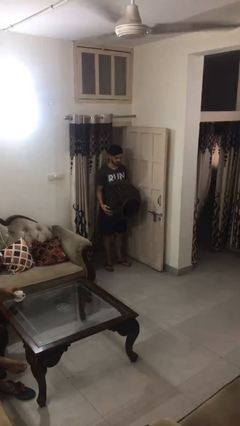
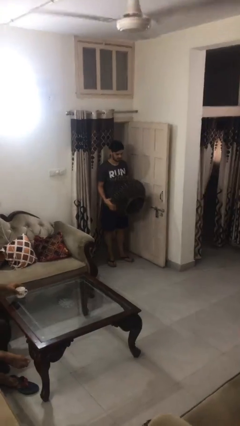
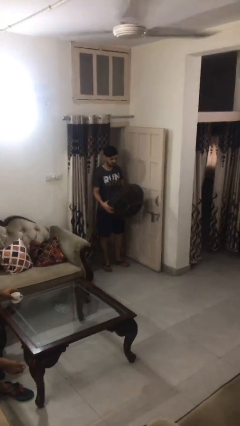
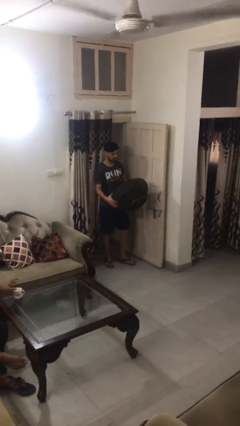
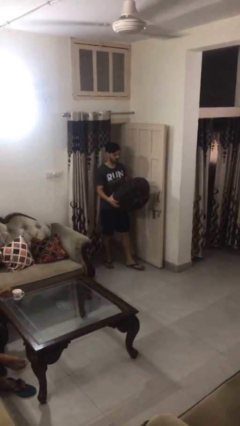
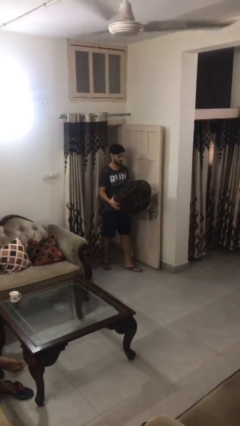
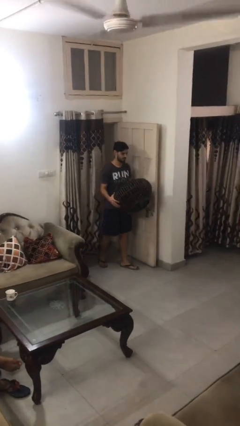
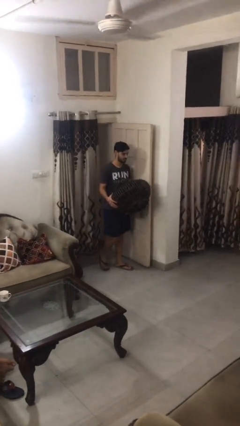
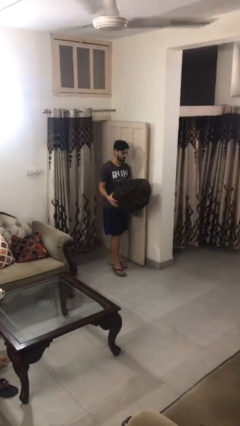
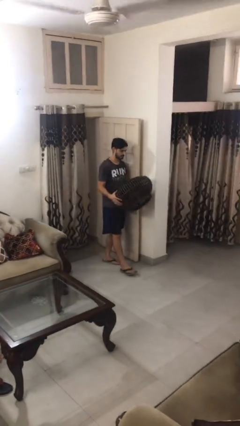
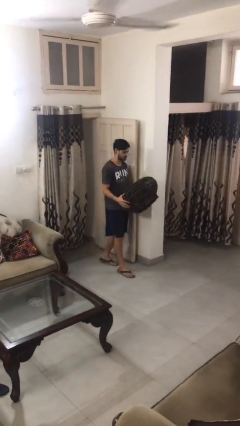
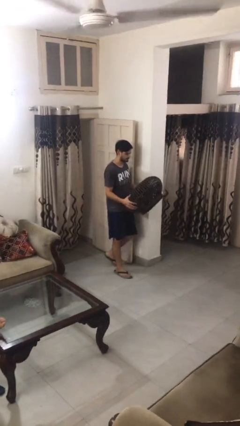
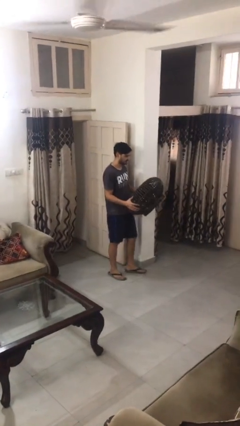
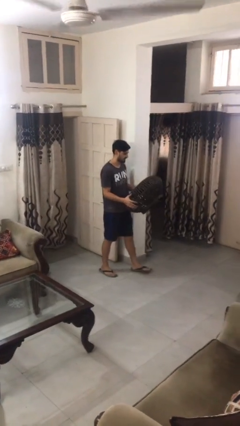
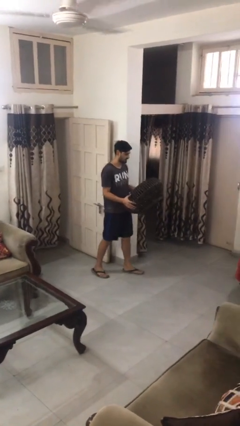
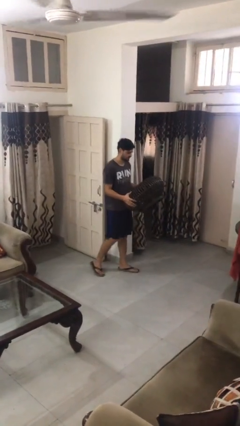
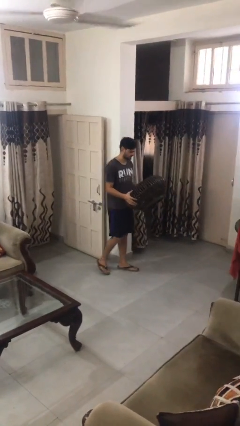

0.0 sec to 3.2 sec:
person carries furniture

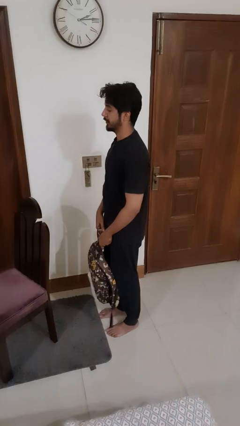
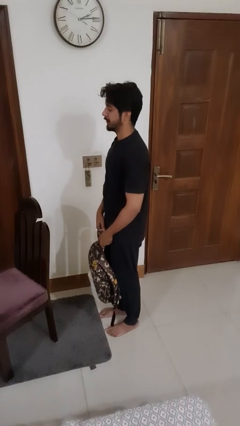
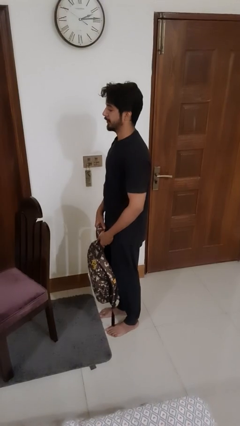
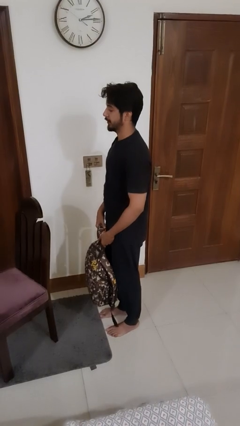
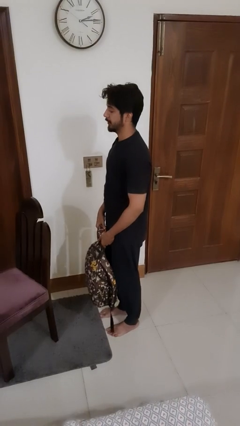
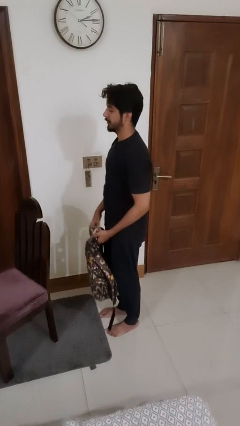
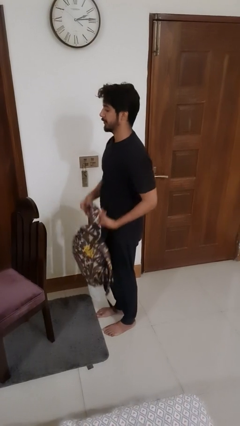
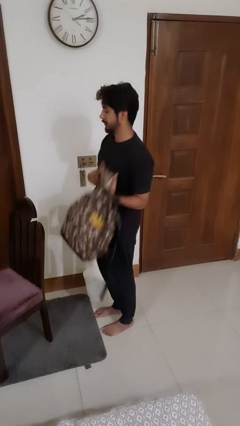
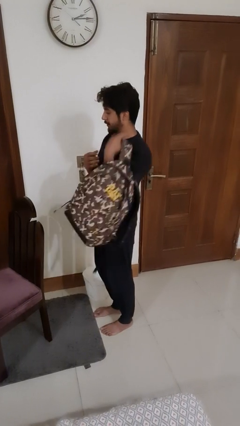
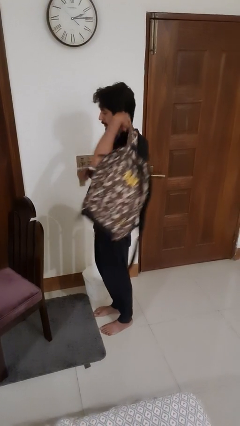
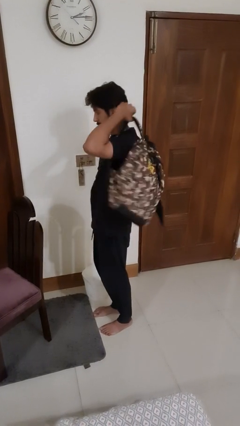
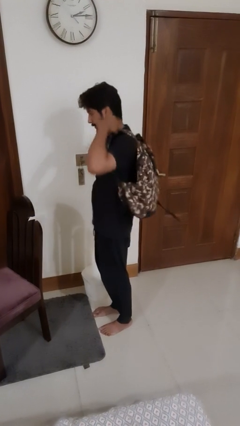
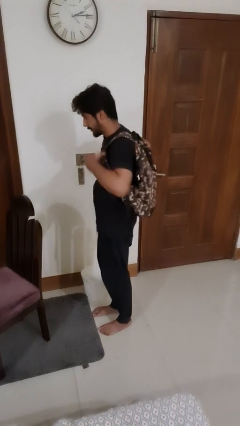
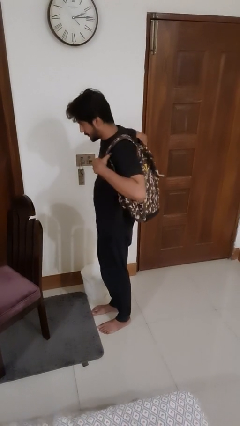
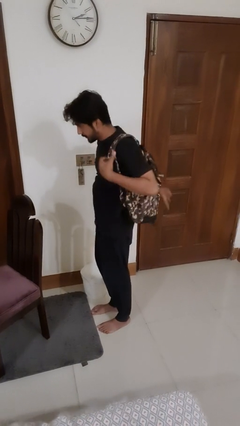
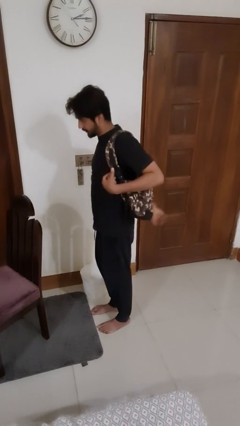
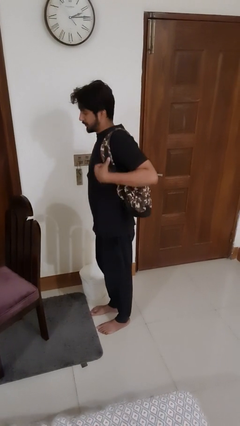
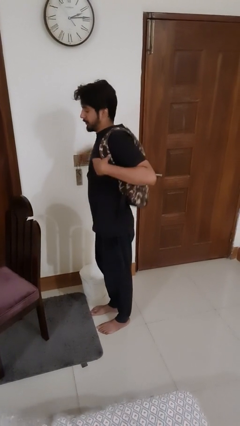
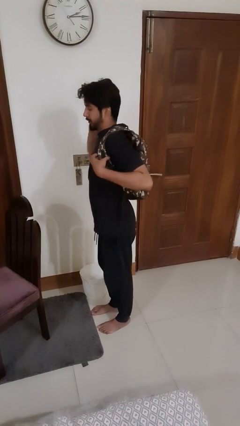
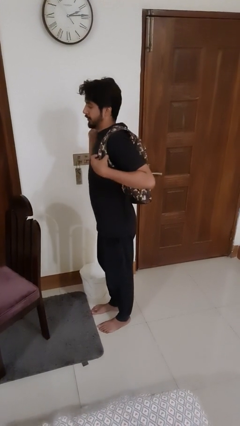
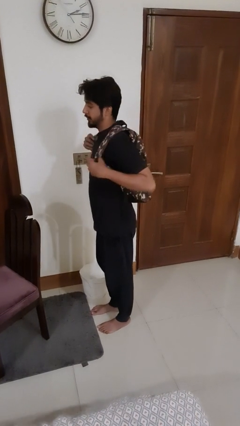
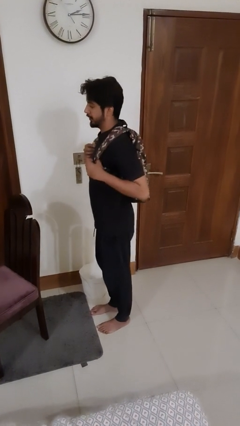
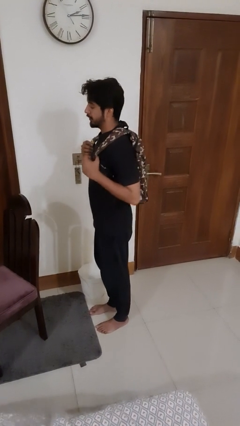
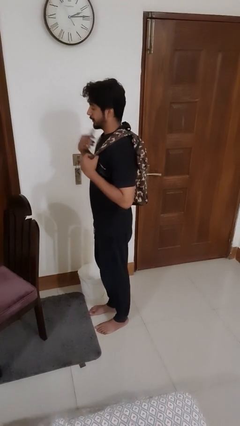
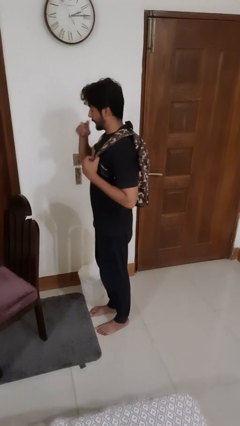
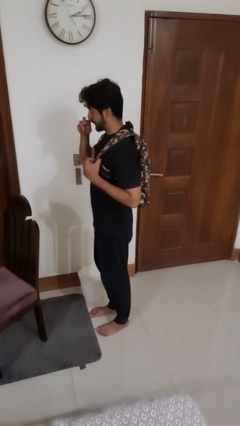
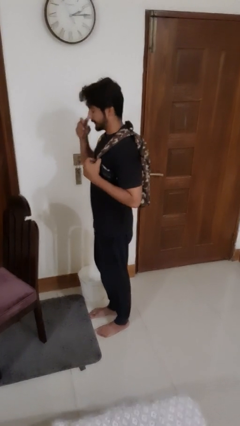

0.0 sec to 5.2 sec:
person puts on backpack

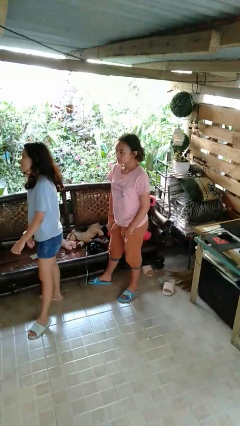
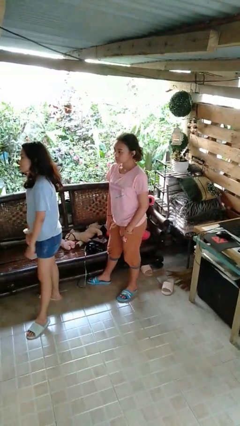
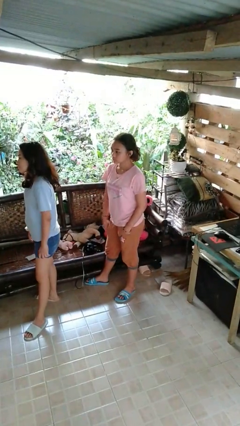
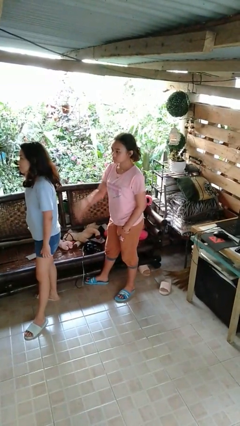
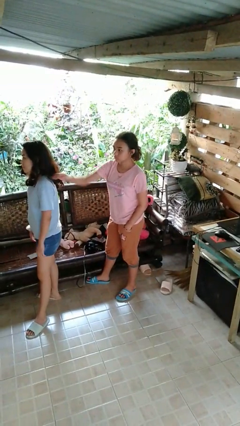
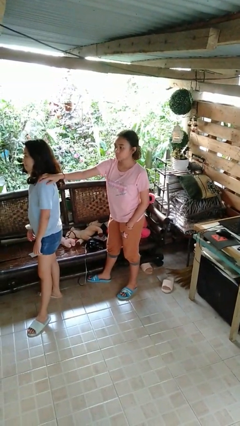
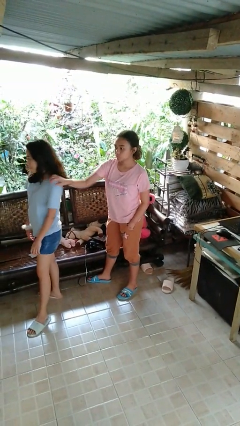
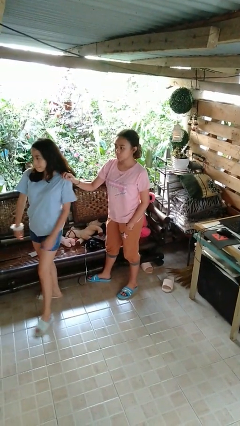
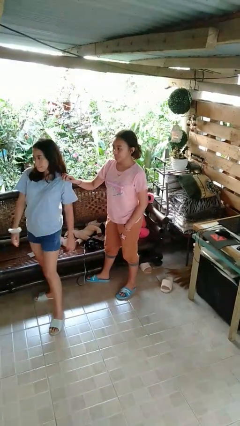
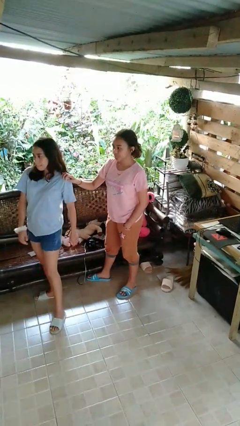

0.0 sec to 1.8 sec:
person grabs person by shoulder

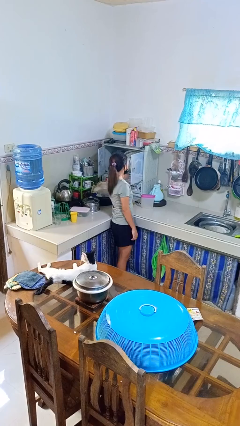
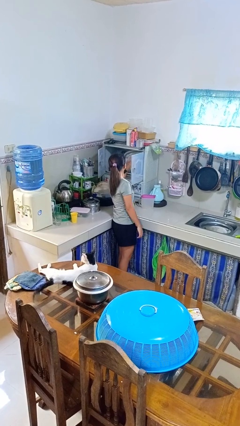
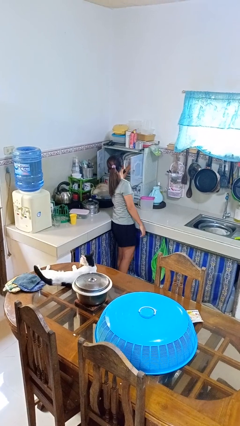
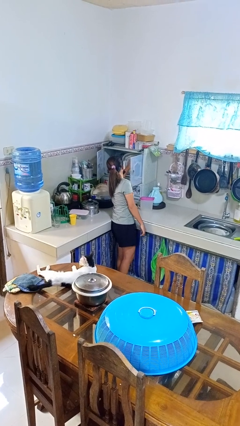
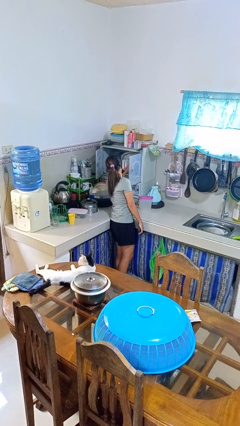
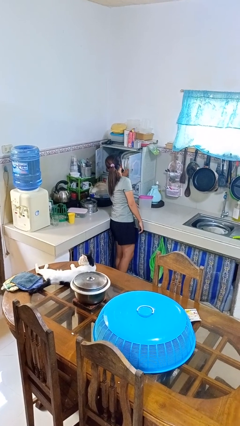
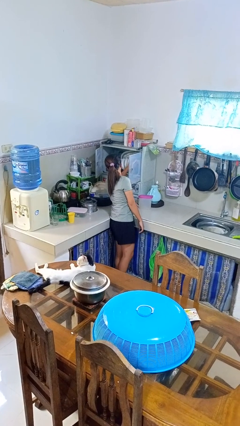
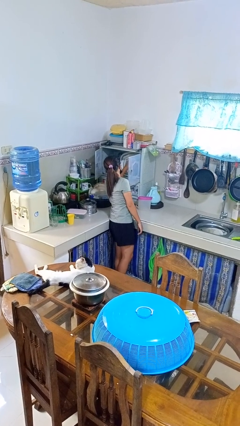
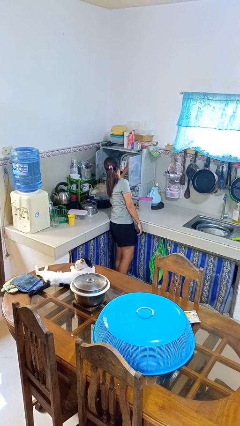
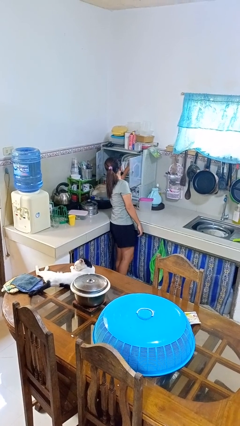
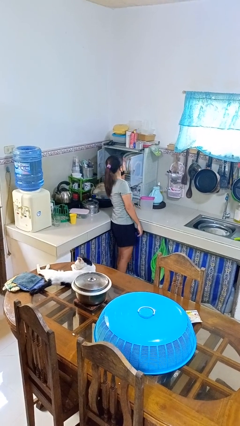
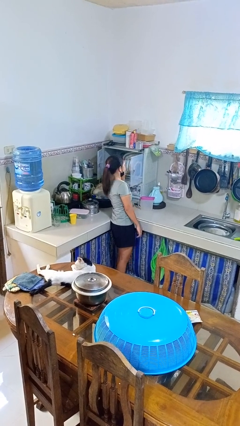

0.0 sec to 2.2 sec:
person searches in kitchen drawer

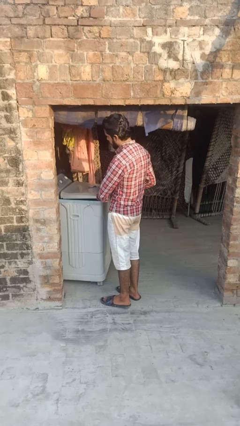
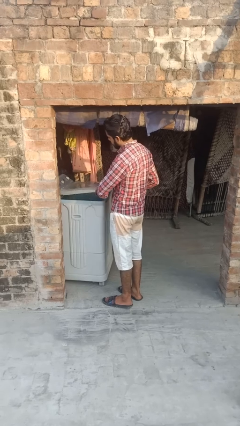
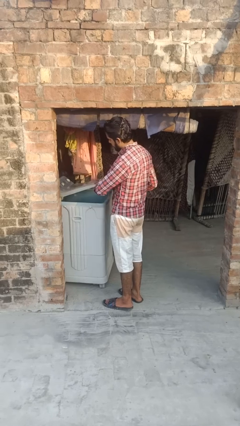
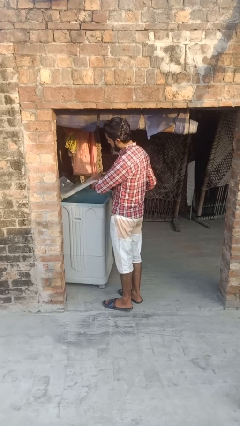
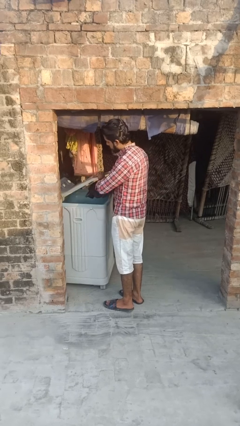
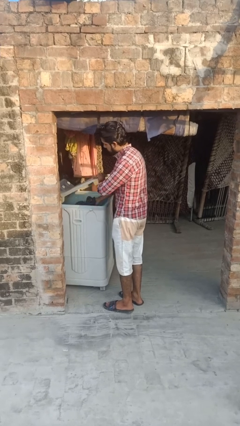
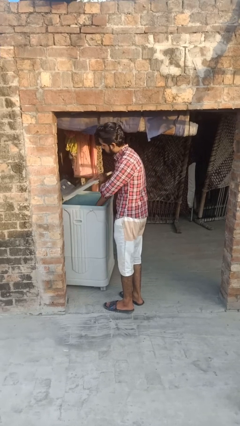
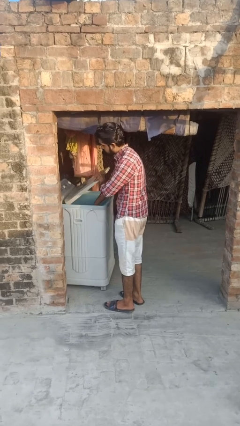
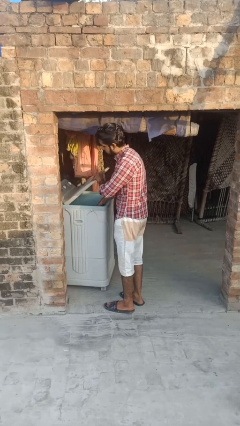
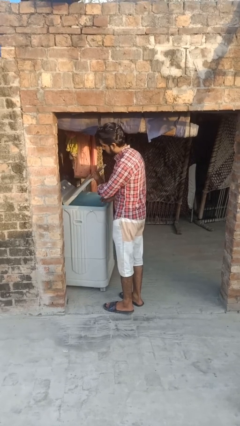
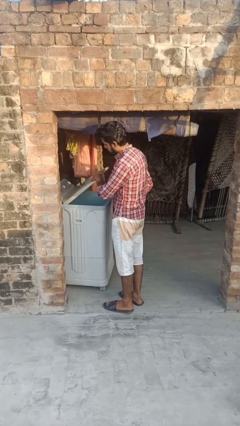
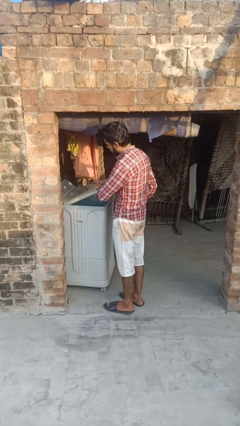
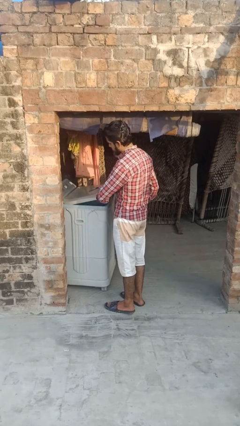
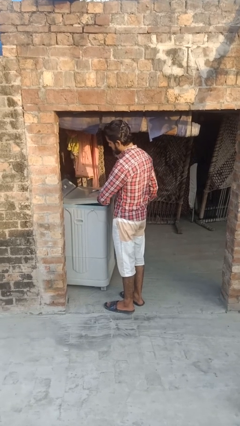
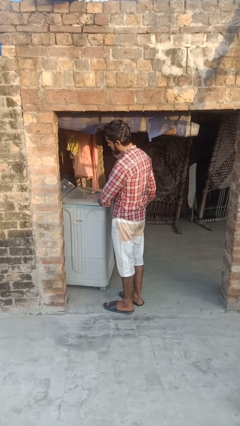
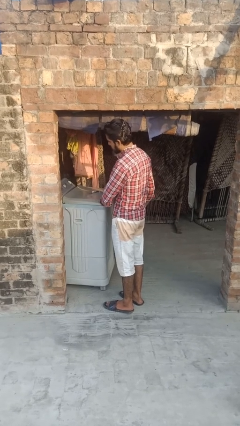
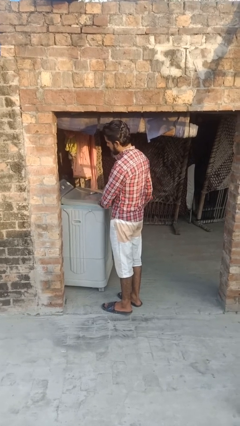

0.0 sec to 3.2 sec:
person loads clotheswasher

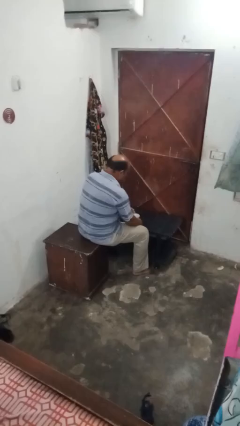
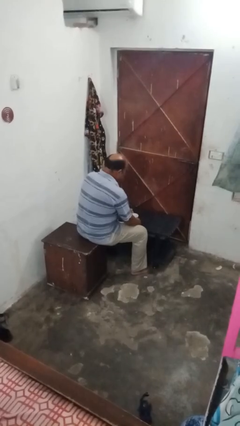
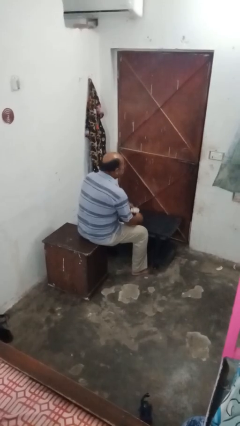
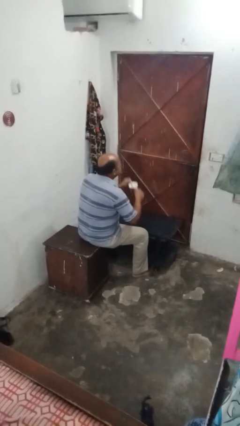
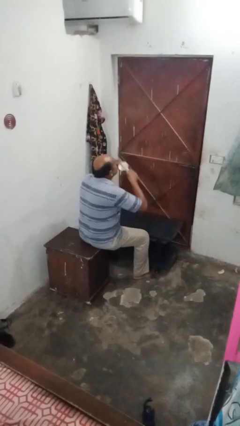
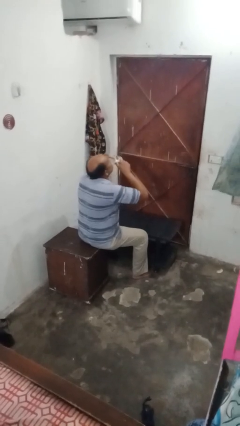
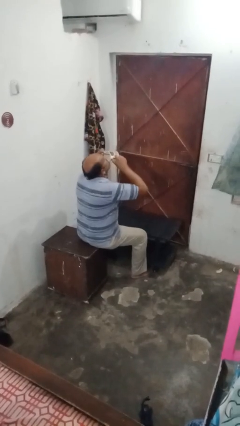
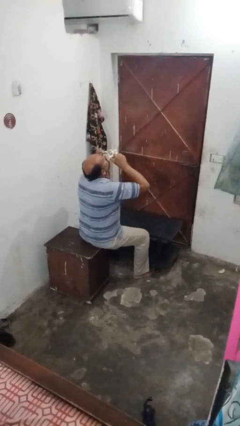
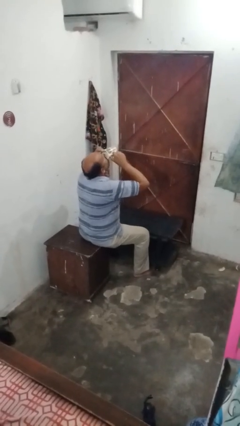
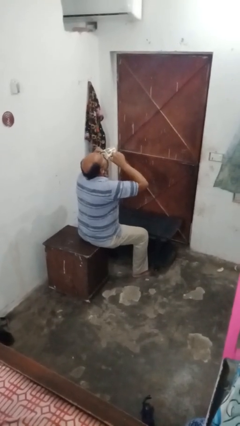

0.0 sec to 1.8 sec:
person drinks from mug

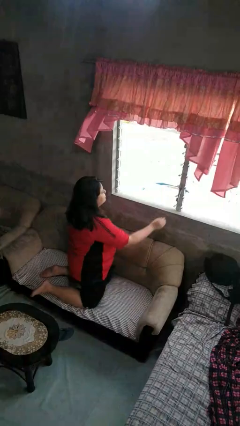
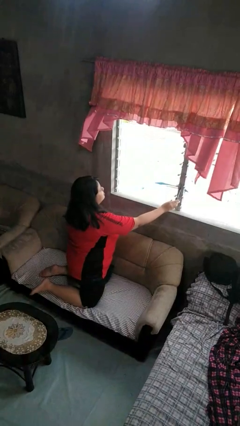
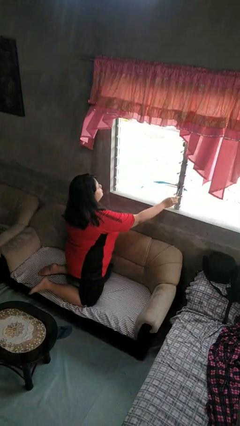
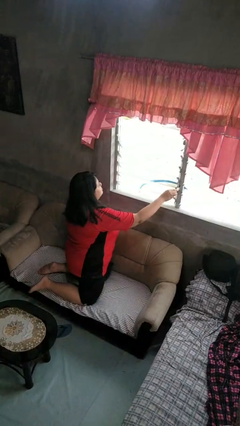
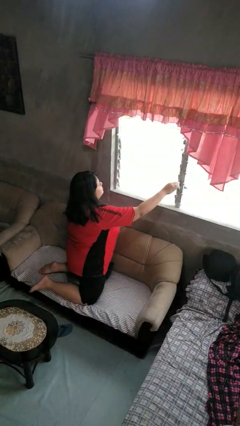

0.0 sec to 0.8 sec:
person closes home window
